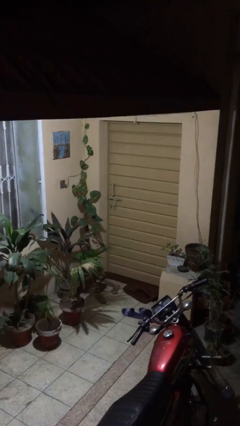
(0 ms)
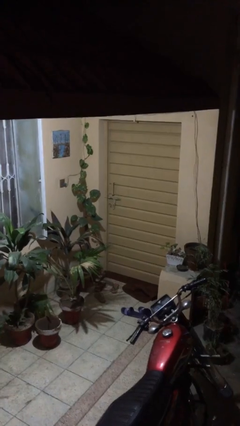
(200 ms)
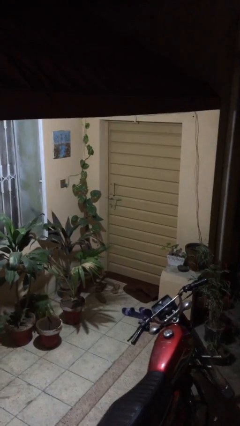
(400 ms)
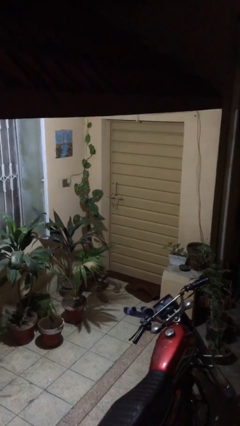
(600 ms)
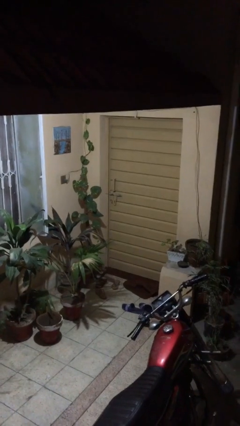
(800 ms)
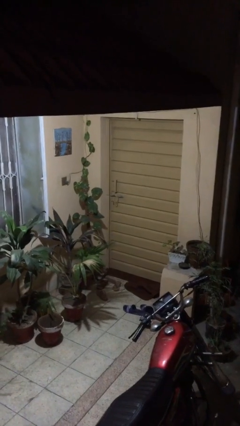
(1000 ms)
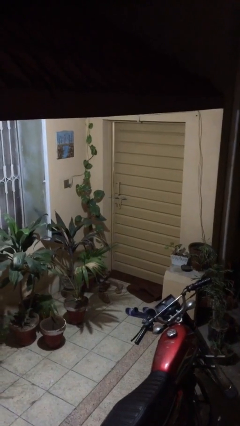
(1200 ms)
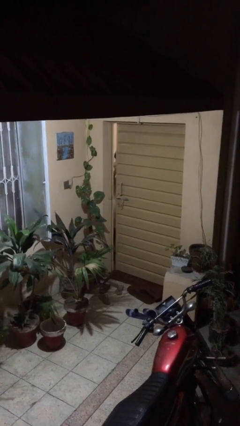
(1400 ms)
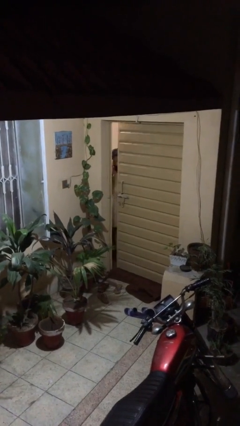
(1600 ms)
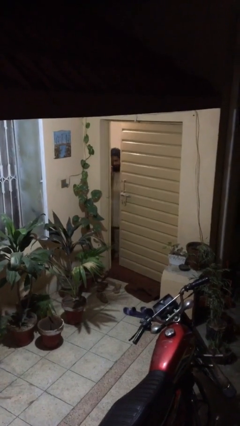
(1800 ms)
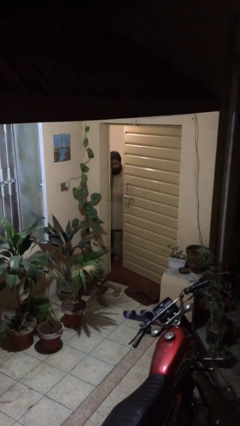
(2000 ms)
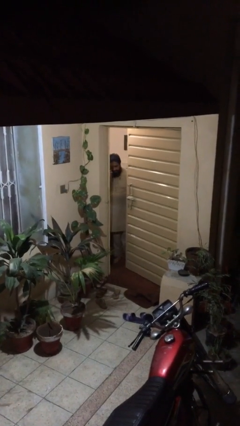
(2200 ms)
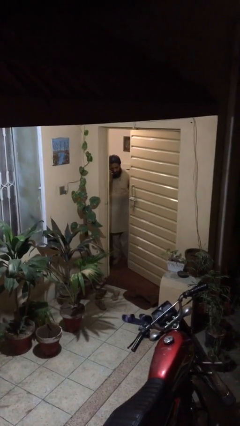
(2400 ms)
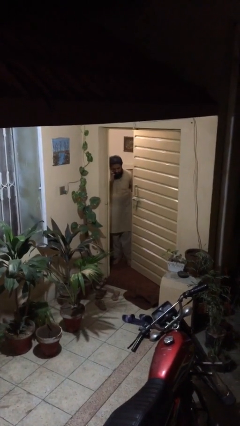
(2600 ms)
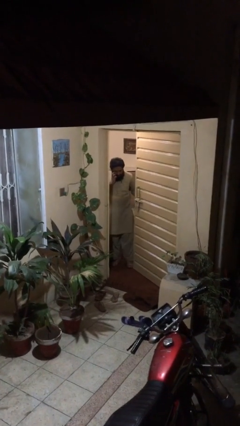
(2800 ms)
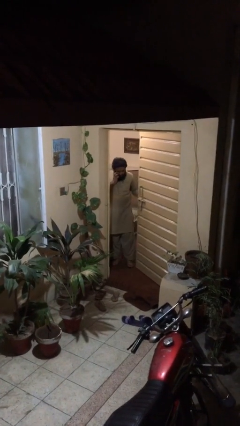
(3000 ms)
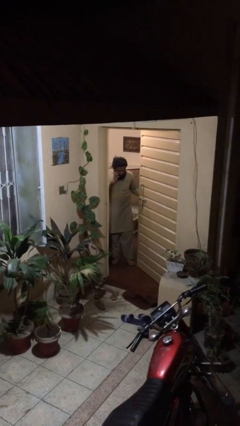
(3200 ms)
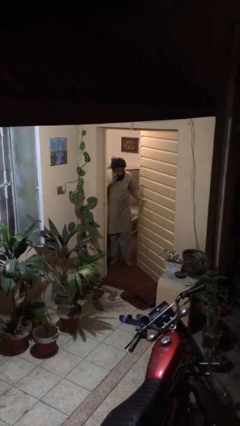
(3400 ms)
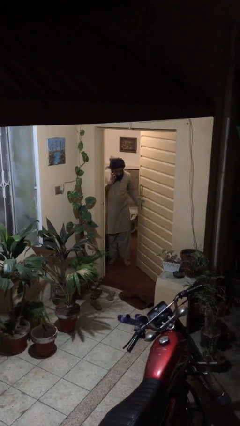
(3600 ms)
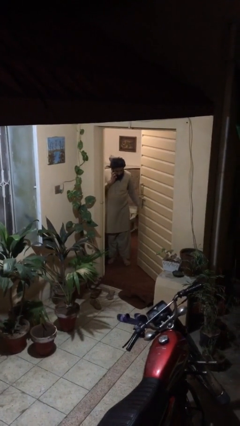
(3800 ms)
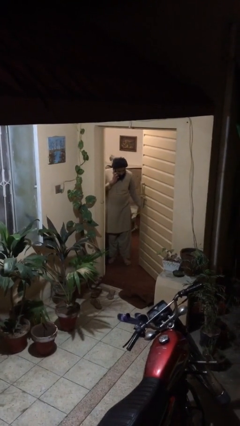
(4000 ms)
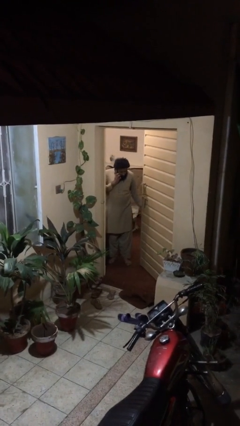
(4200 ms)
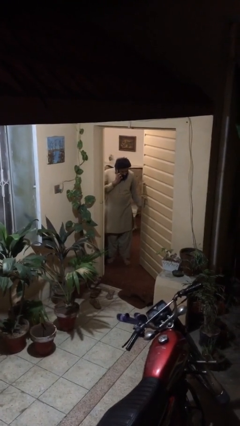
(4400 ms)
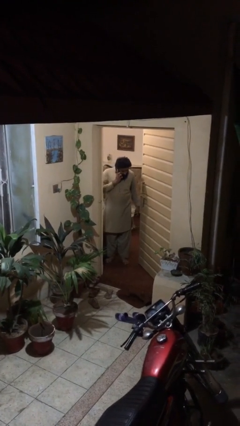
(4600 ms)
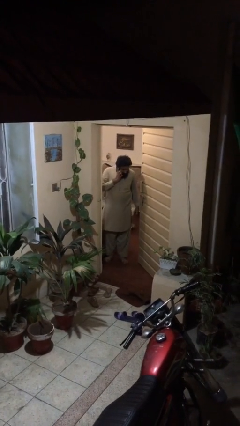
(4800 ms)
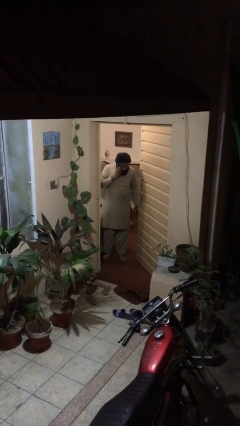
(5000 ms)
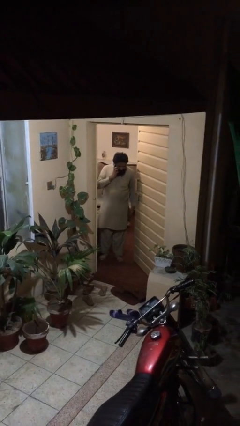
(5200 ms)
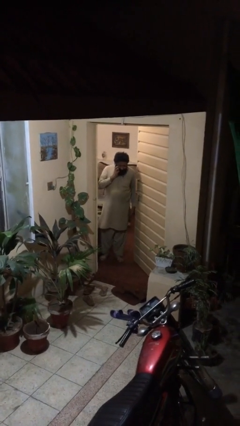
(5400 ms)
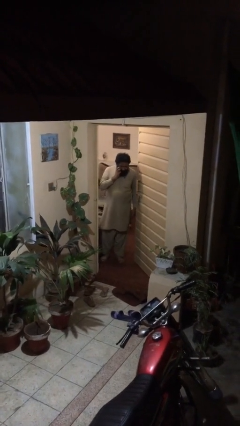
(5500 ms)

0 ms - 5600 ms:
person opens facility door

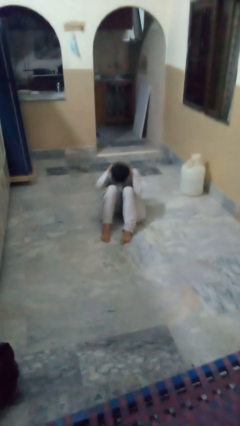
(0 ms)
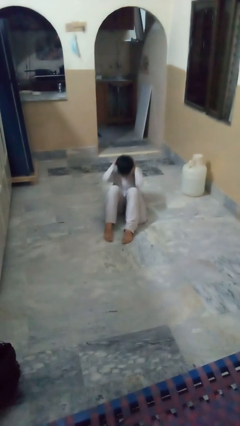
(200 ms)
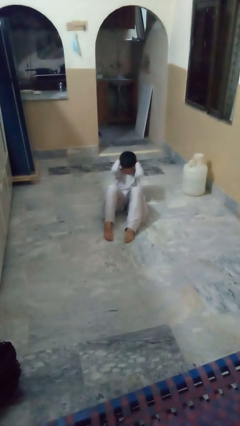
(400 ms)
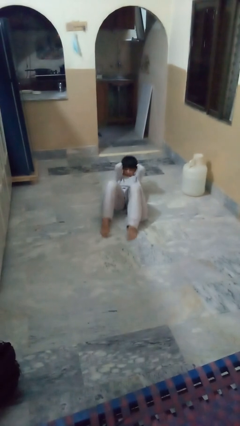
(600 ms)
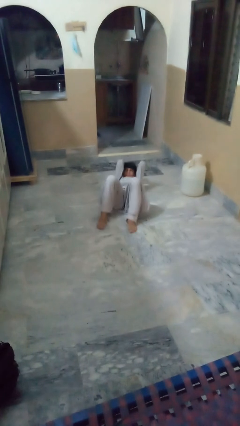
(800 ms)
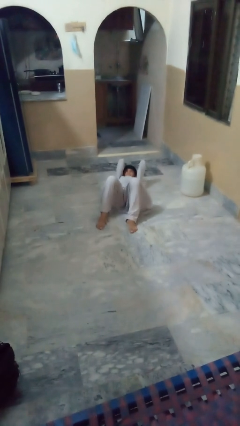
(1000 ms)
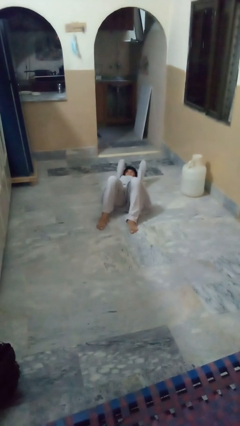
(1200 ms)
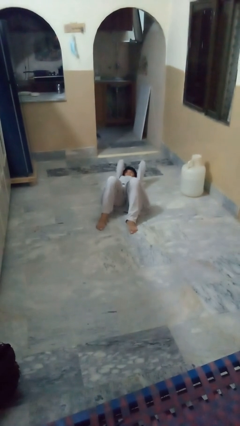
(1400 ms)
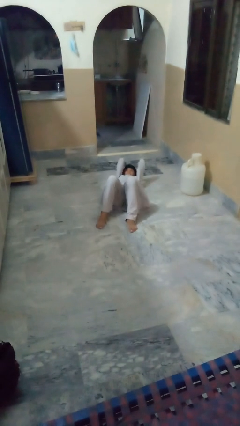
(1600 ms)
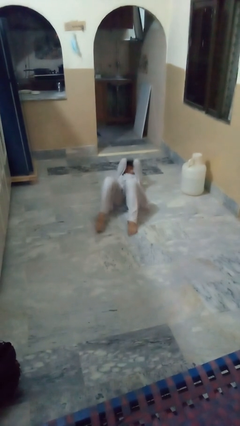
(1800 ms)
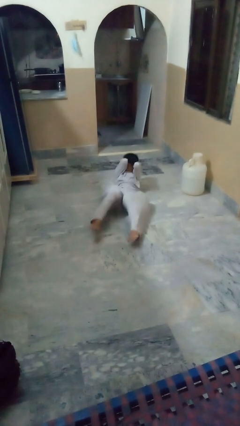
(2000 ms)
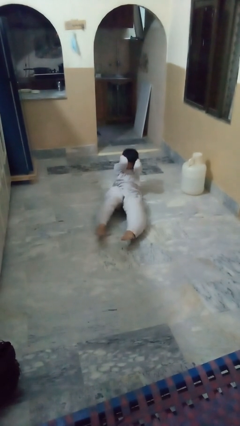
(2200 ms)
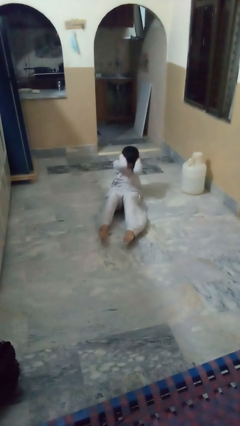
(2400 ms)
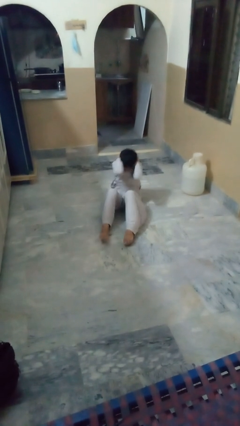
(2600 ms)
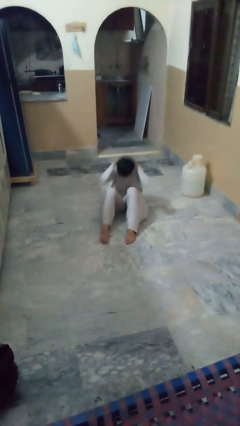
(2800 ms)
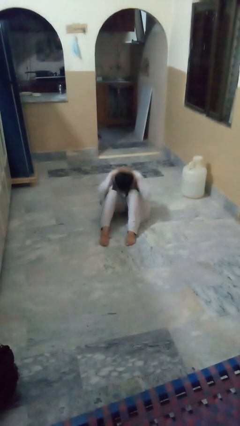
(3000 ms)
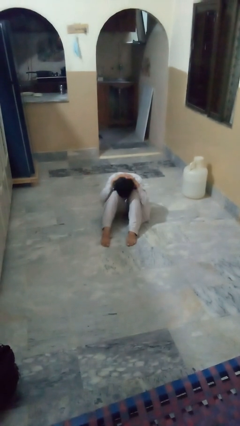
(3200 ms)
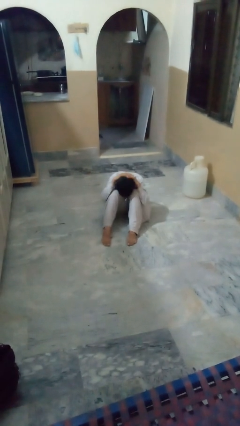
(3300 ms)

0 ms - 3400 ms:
person exercises with situp

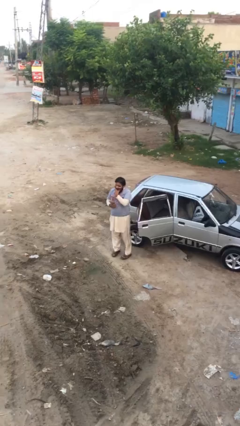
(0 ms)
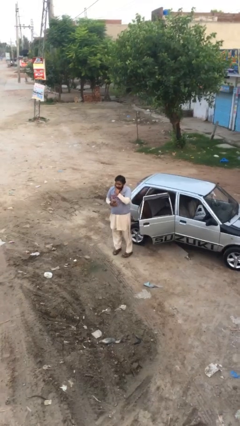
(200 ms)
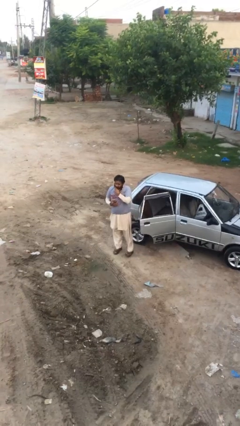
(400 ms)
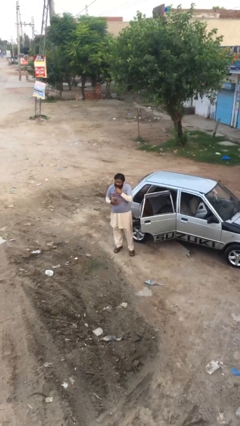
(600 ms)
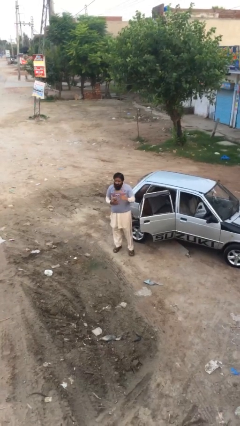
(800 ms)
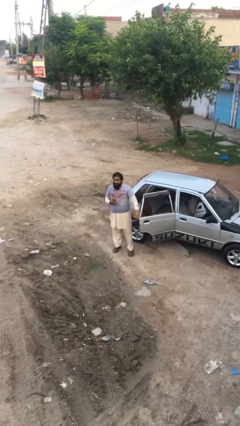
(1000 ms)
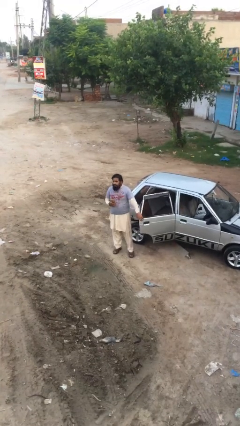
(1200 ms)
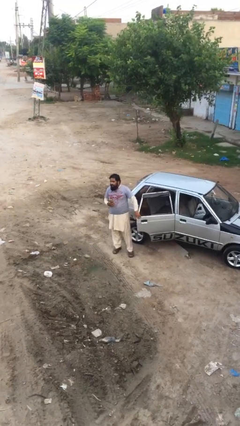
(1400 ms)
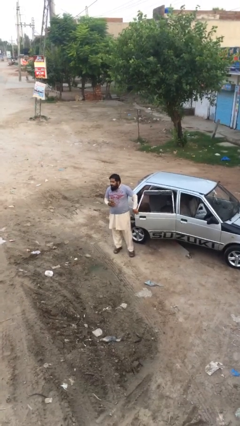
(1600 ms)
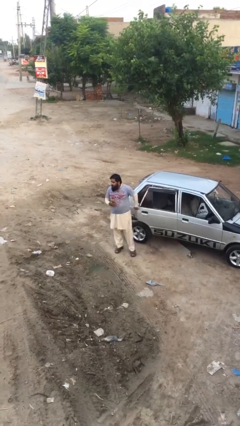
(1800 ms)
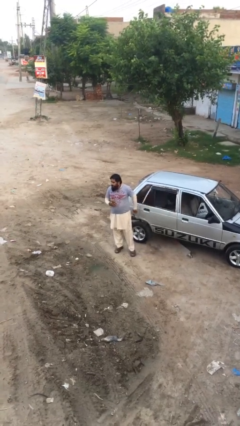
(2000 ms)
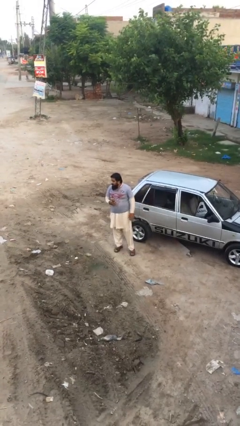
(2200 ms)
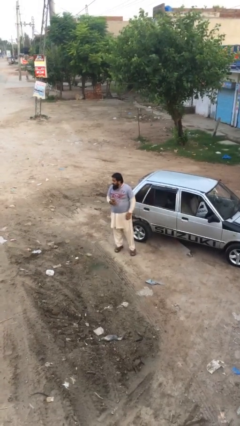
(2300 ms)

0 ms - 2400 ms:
person closes car door

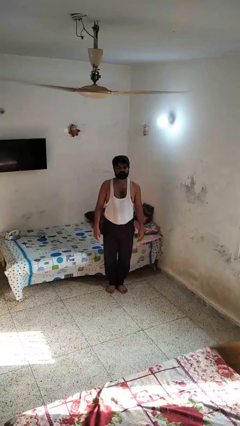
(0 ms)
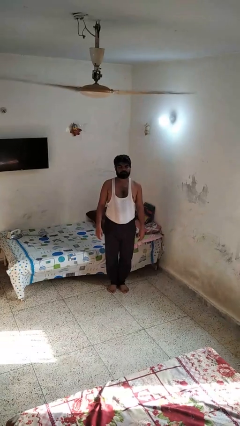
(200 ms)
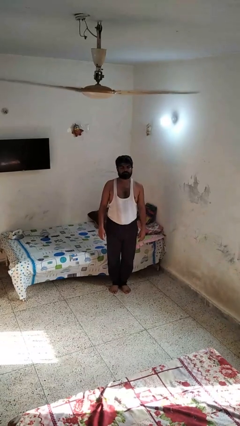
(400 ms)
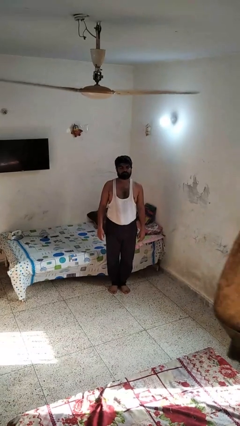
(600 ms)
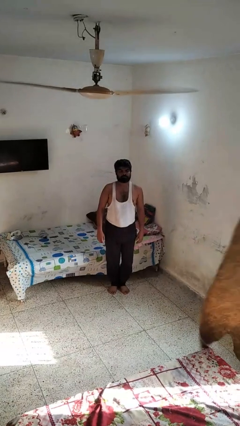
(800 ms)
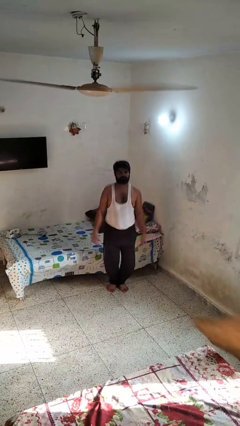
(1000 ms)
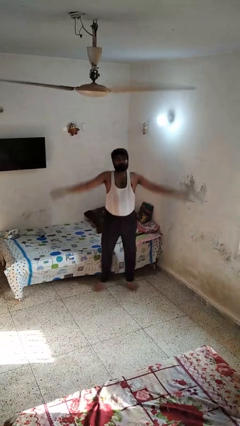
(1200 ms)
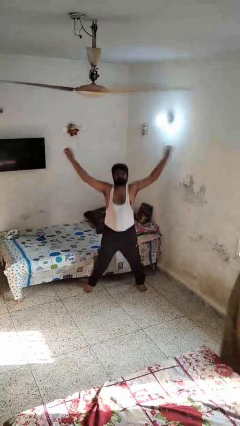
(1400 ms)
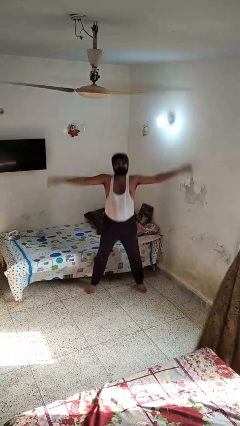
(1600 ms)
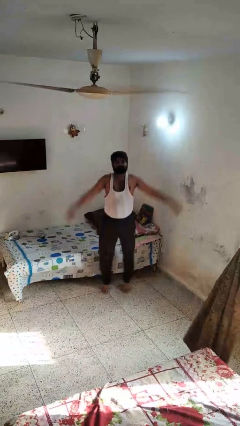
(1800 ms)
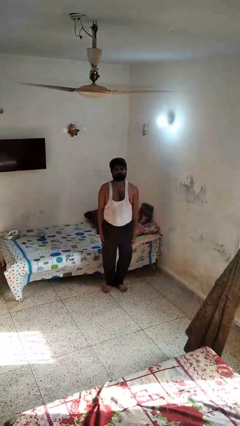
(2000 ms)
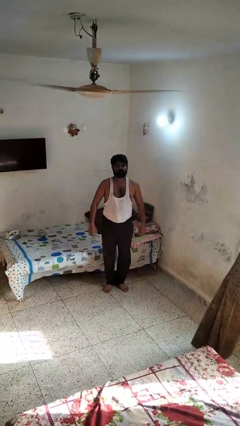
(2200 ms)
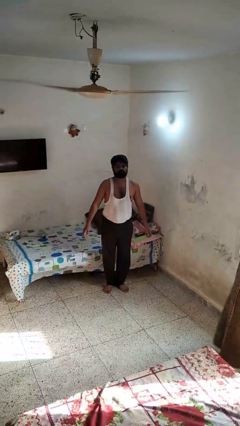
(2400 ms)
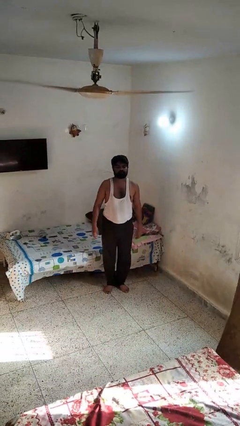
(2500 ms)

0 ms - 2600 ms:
person exercises with jumping jacks

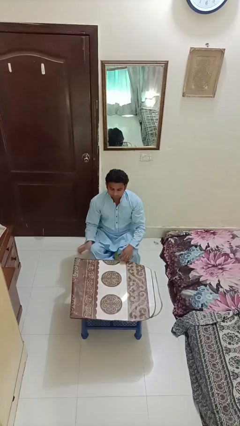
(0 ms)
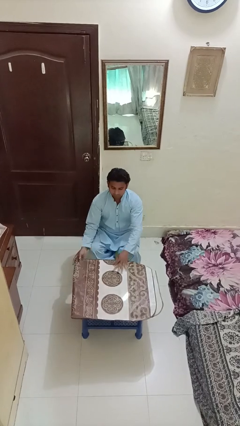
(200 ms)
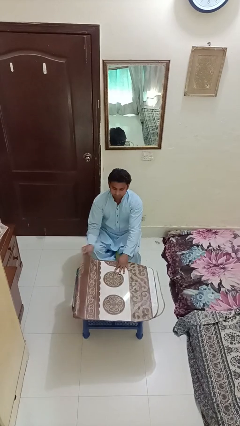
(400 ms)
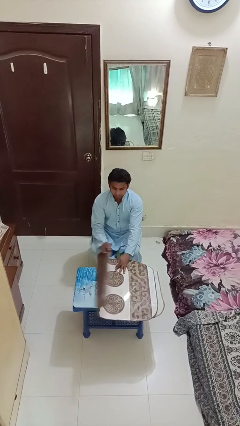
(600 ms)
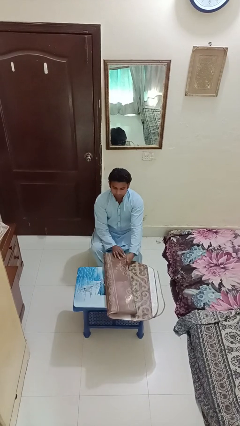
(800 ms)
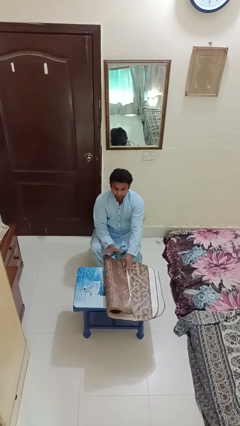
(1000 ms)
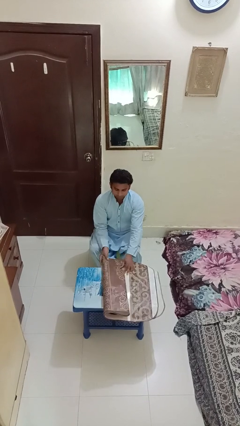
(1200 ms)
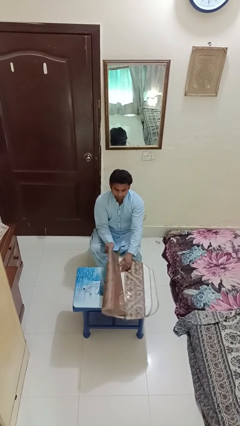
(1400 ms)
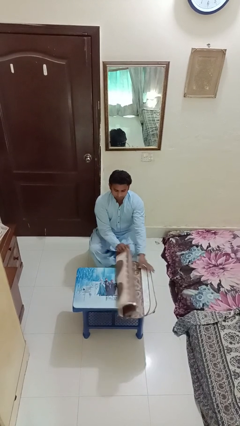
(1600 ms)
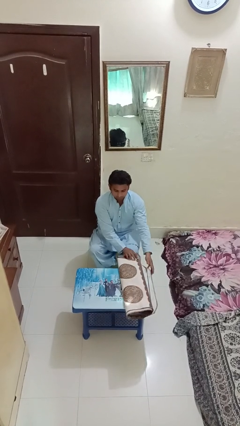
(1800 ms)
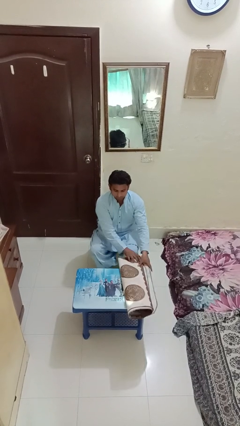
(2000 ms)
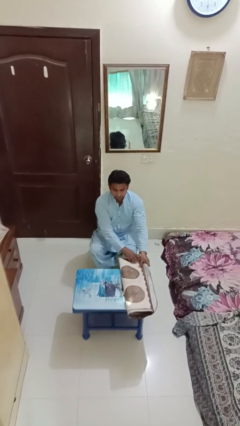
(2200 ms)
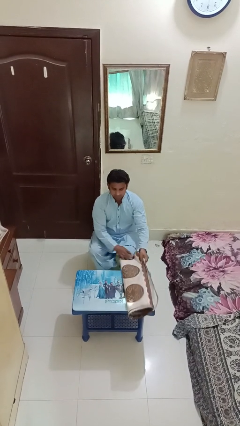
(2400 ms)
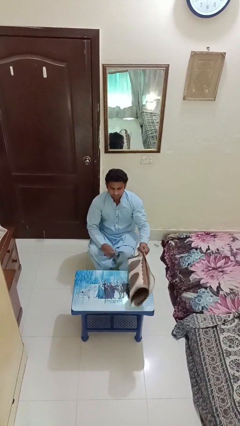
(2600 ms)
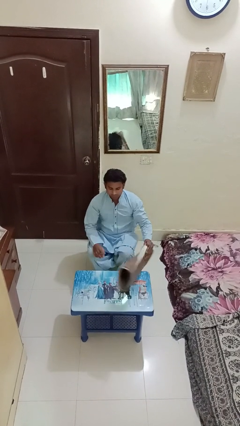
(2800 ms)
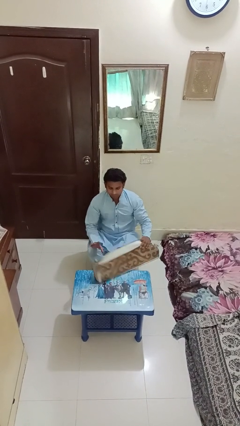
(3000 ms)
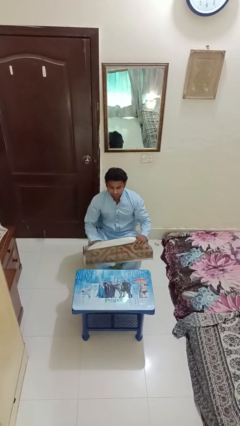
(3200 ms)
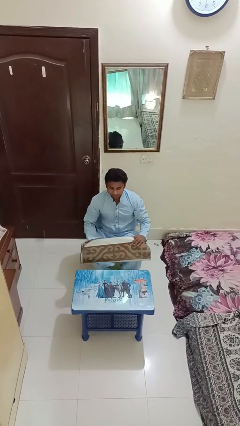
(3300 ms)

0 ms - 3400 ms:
person folds tablecloth
